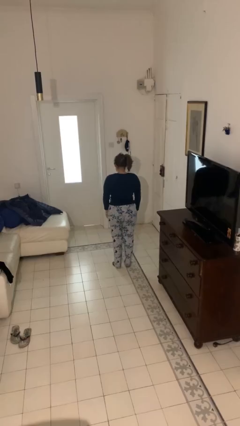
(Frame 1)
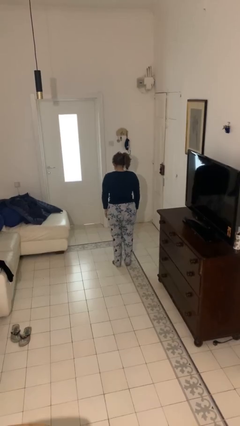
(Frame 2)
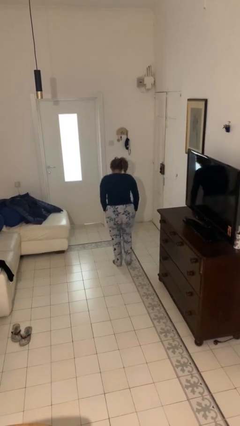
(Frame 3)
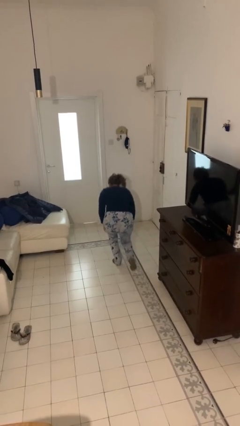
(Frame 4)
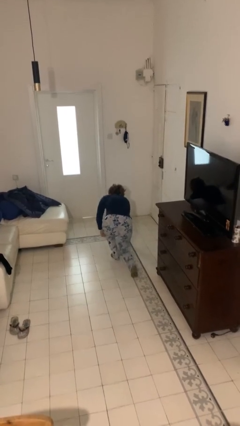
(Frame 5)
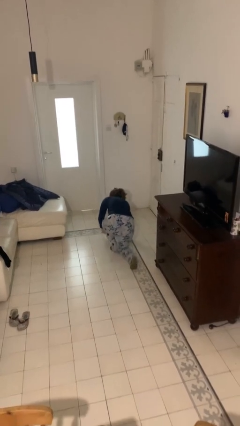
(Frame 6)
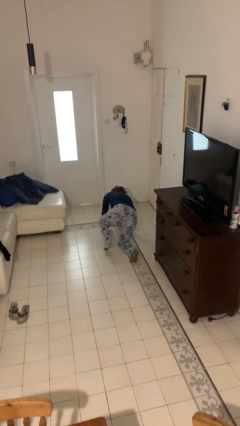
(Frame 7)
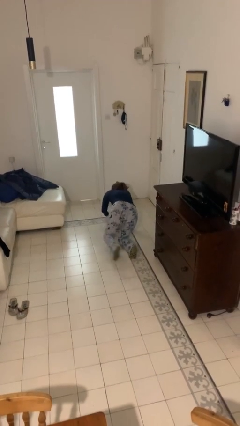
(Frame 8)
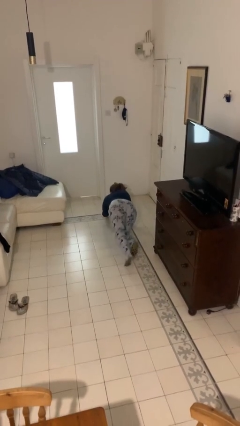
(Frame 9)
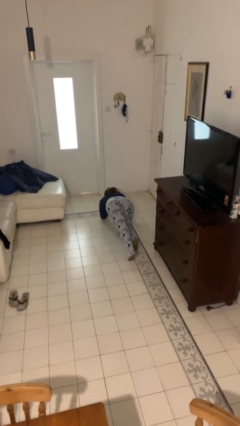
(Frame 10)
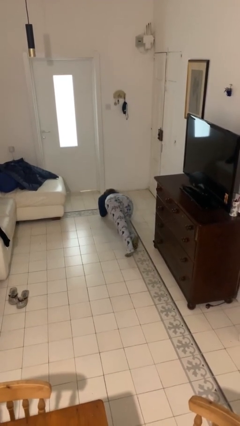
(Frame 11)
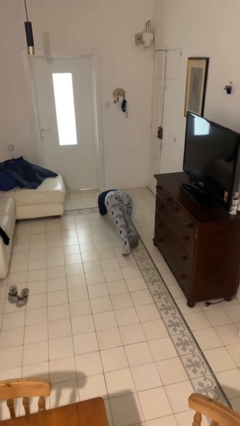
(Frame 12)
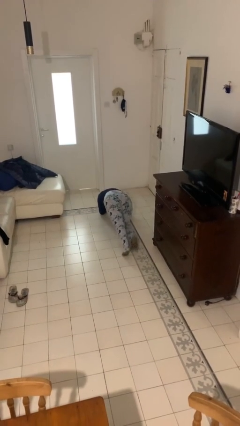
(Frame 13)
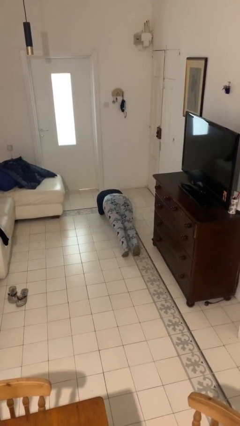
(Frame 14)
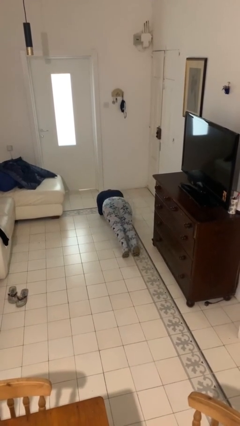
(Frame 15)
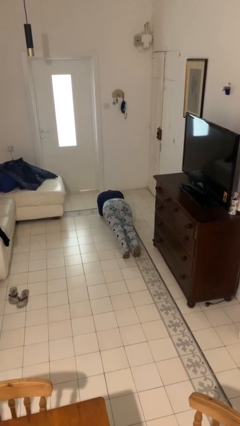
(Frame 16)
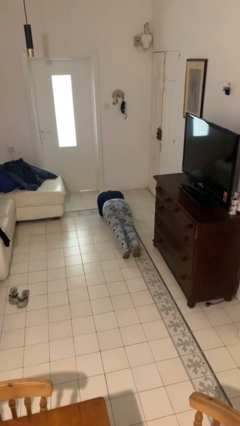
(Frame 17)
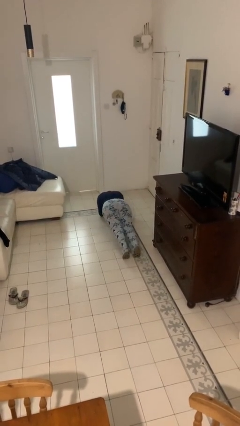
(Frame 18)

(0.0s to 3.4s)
person exercises with plank

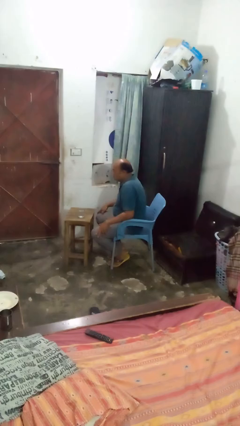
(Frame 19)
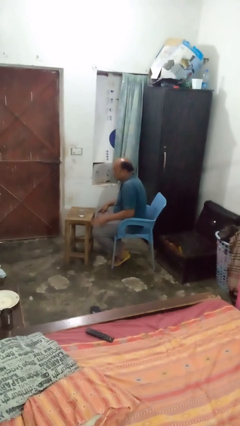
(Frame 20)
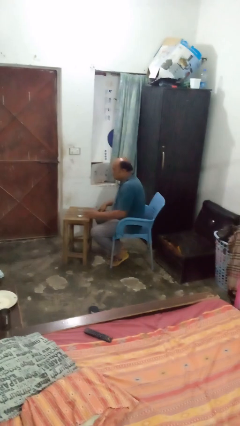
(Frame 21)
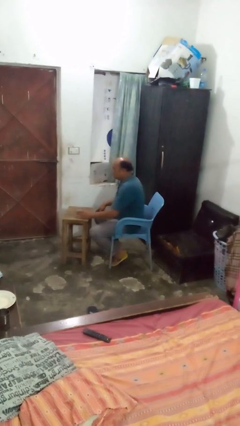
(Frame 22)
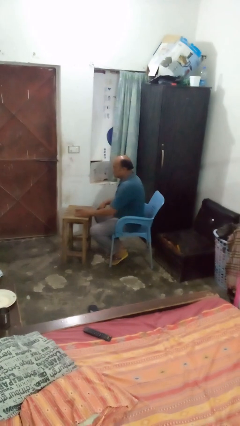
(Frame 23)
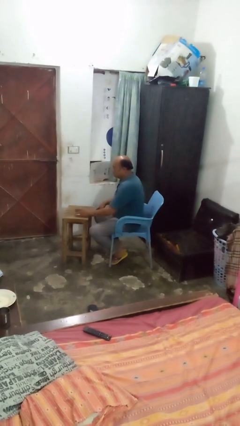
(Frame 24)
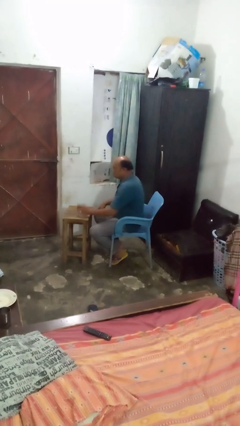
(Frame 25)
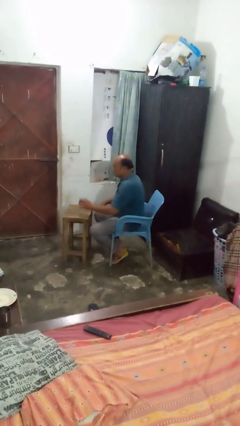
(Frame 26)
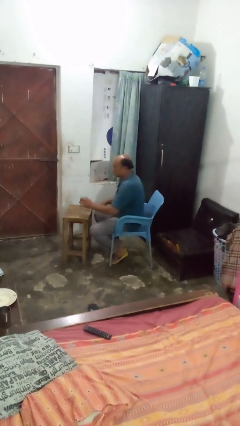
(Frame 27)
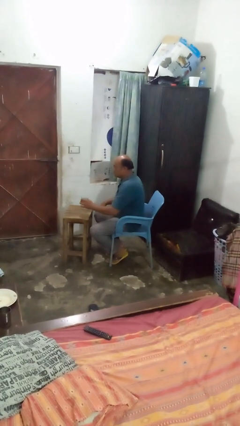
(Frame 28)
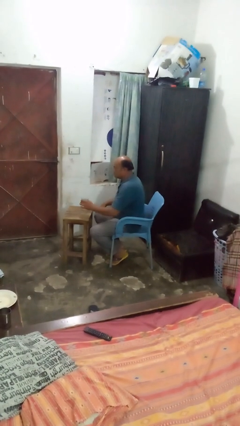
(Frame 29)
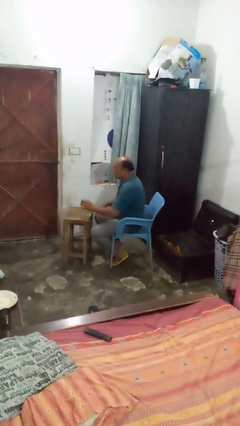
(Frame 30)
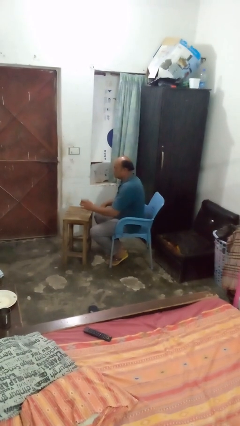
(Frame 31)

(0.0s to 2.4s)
person picks up object from table

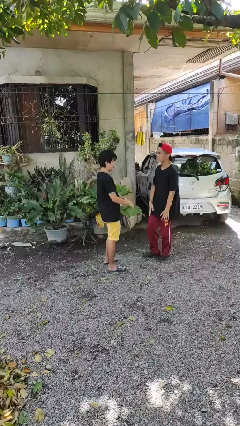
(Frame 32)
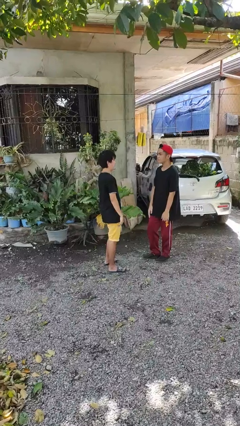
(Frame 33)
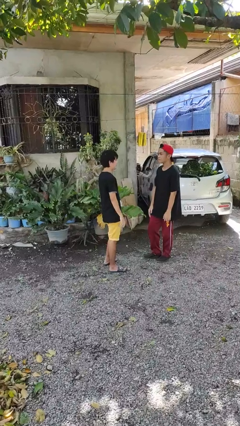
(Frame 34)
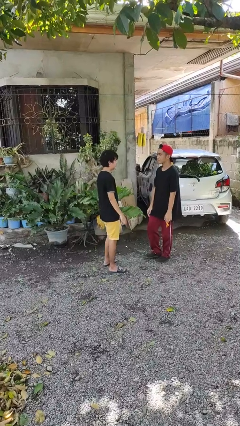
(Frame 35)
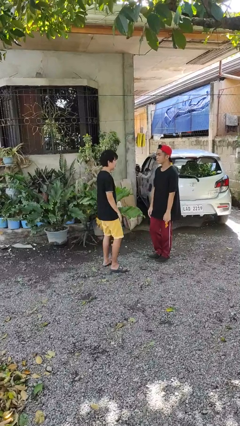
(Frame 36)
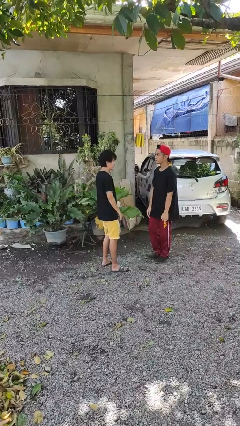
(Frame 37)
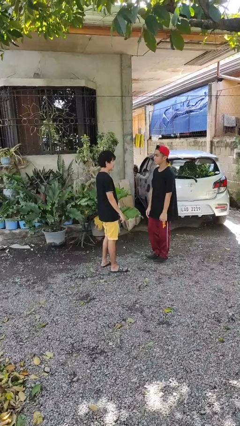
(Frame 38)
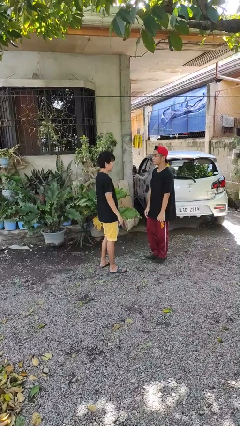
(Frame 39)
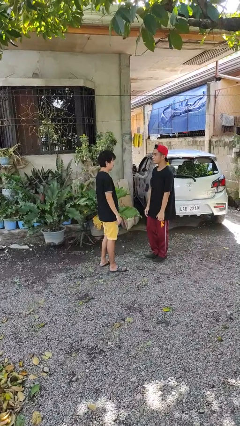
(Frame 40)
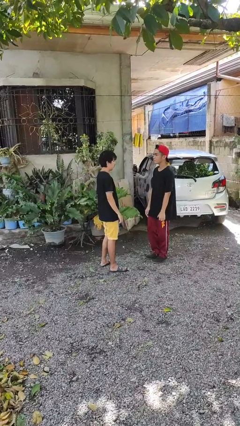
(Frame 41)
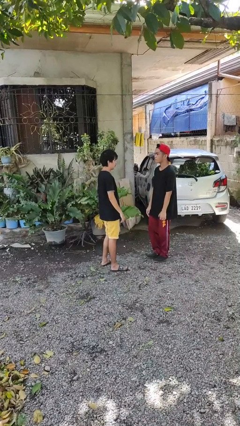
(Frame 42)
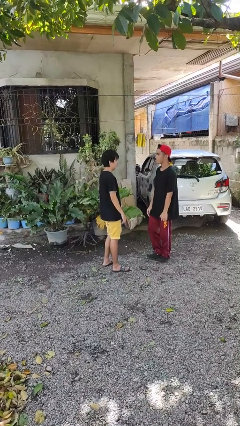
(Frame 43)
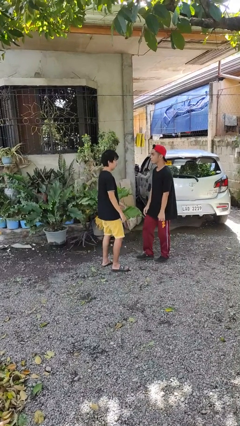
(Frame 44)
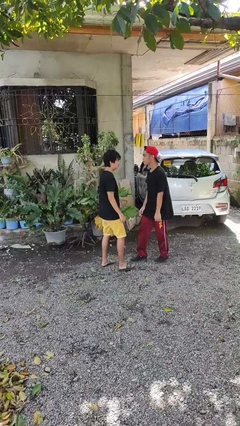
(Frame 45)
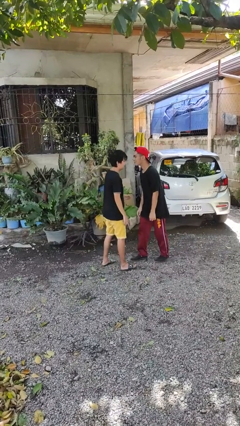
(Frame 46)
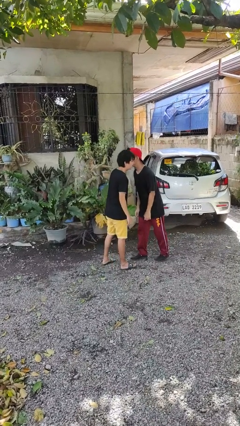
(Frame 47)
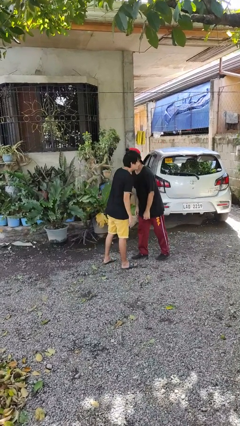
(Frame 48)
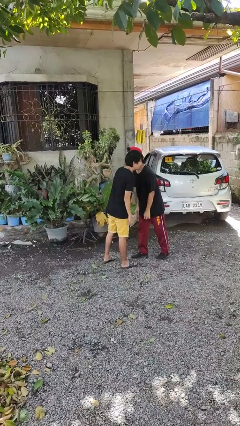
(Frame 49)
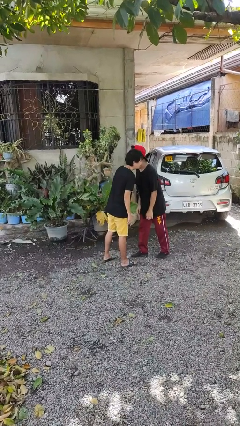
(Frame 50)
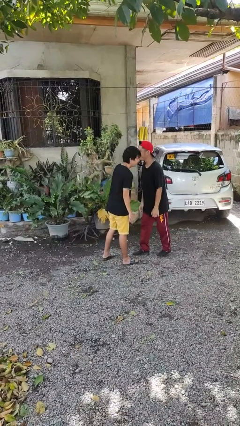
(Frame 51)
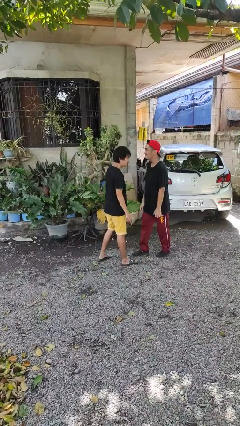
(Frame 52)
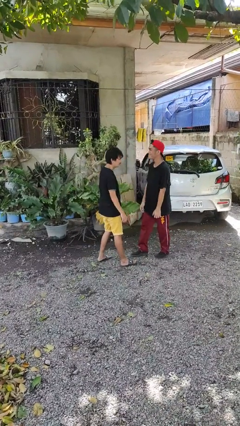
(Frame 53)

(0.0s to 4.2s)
person kisses cheek of person

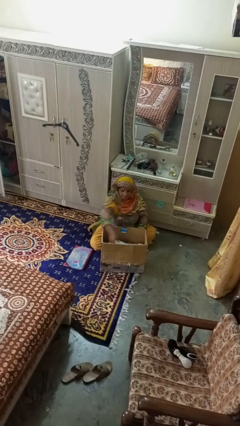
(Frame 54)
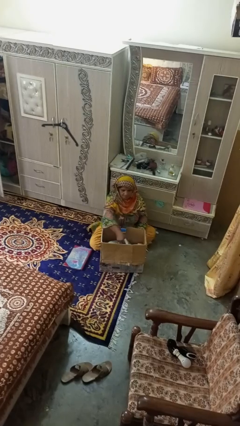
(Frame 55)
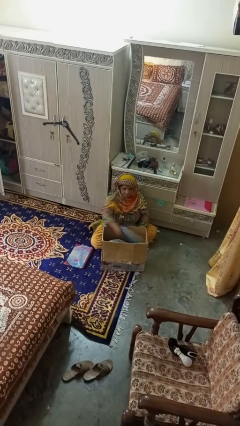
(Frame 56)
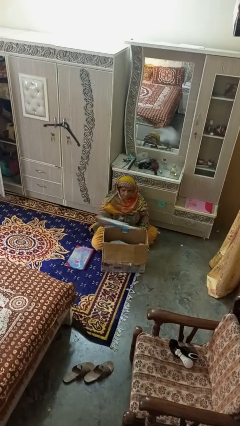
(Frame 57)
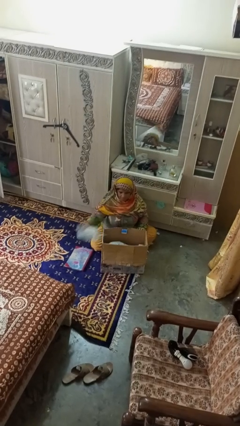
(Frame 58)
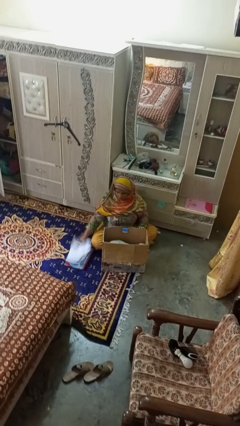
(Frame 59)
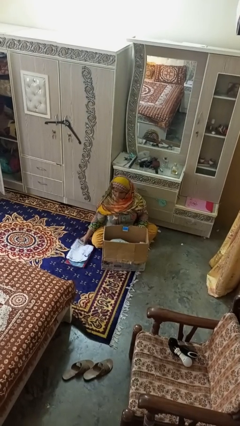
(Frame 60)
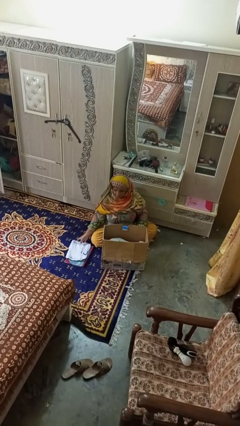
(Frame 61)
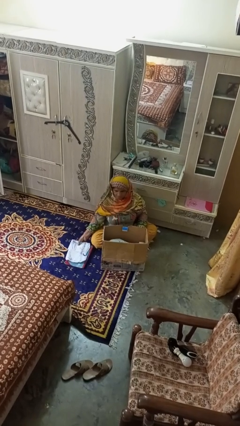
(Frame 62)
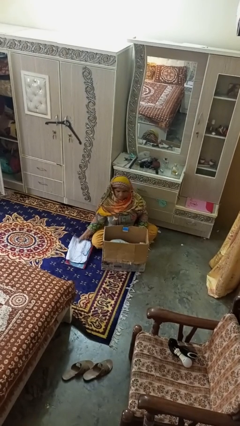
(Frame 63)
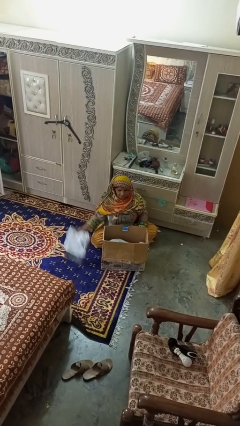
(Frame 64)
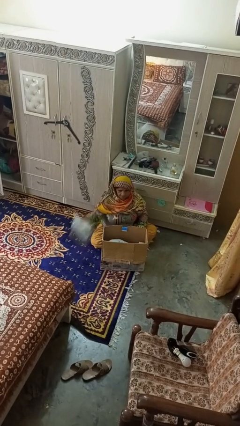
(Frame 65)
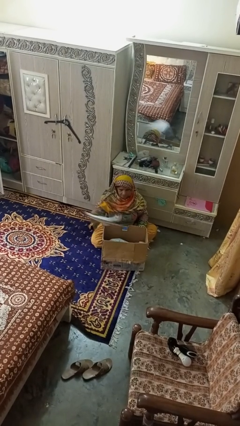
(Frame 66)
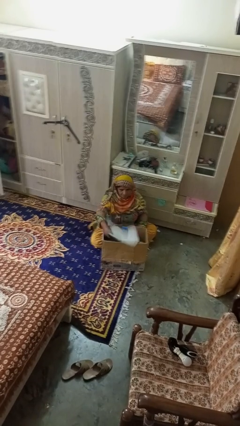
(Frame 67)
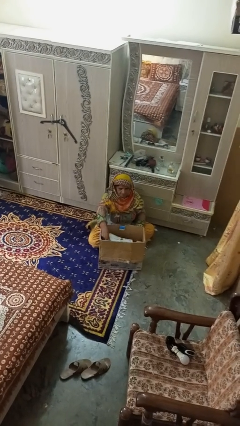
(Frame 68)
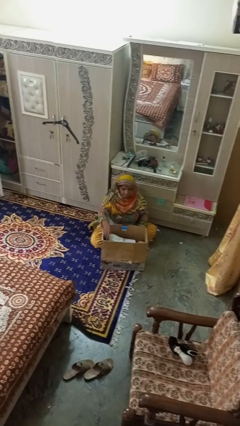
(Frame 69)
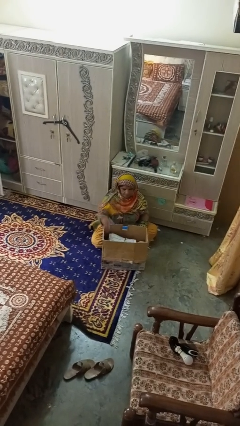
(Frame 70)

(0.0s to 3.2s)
person puts object into box

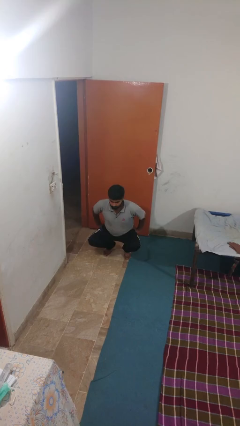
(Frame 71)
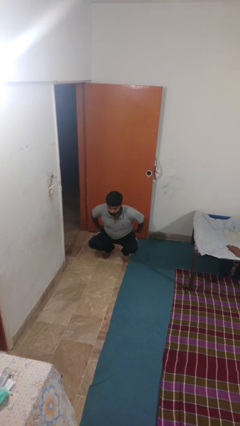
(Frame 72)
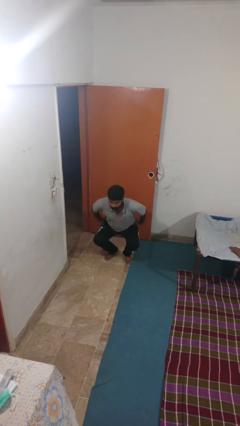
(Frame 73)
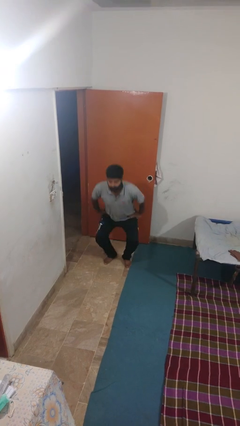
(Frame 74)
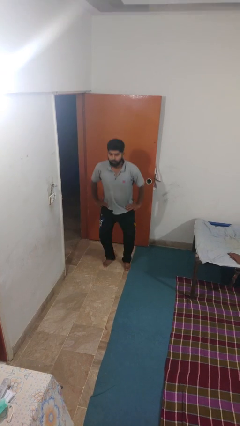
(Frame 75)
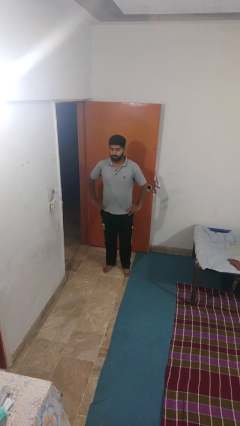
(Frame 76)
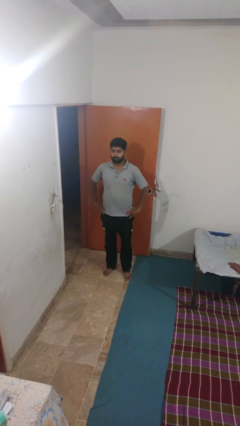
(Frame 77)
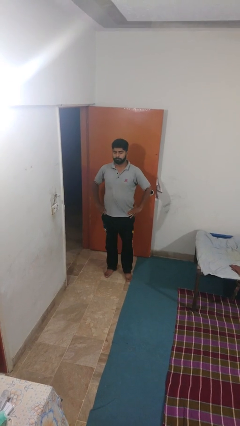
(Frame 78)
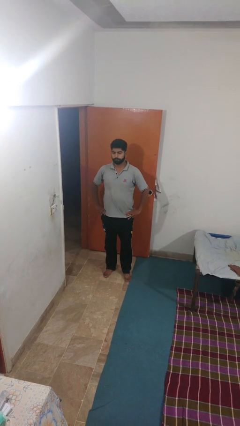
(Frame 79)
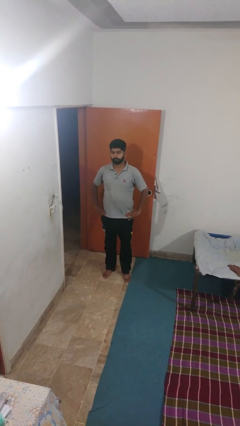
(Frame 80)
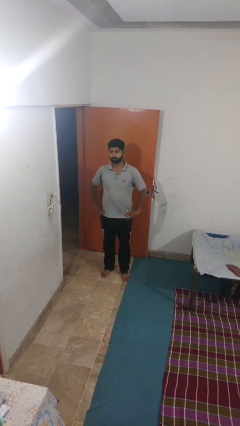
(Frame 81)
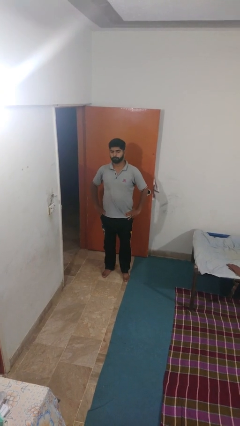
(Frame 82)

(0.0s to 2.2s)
person stands up

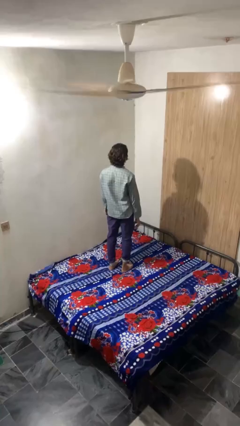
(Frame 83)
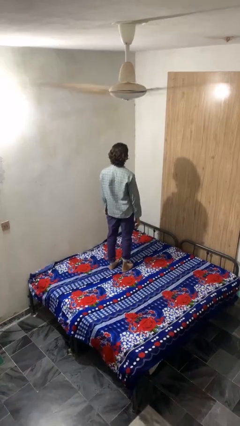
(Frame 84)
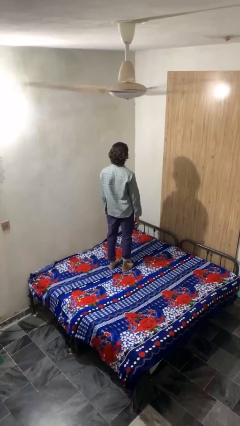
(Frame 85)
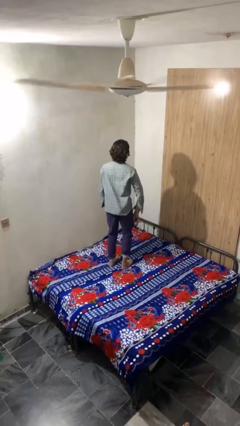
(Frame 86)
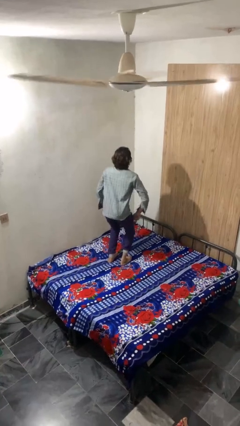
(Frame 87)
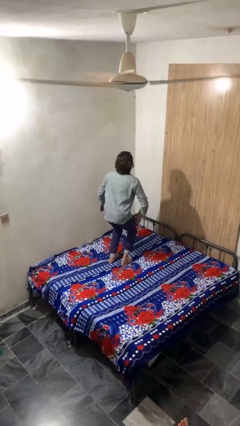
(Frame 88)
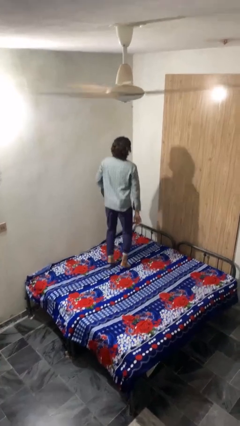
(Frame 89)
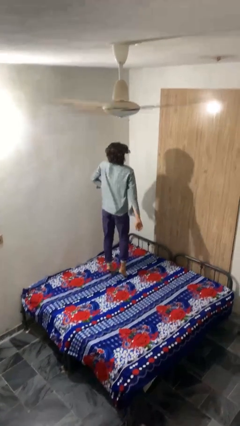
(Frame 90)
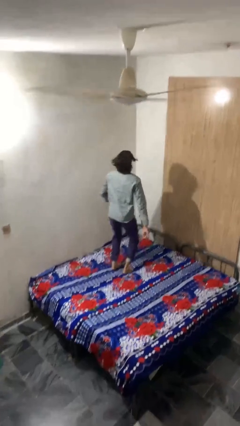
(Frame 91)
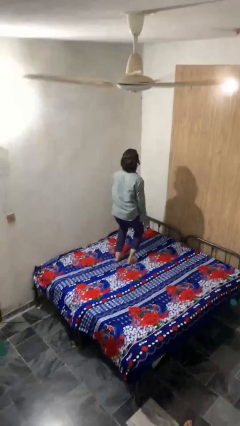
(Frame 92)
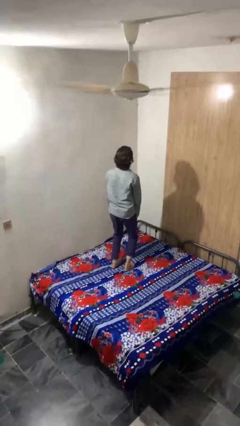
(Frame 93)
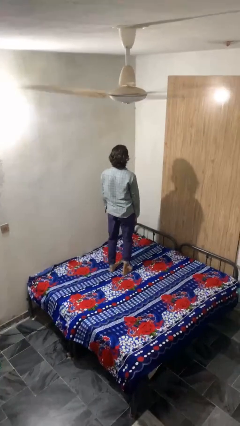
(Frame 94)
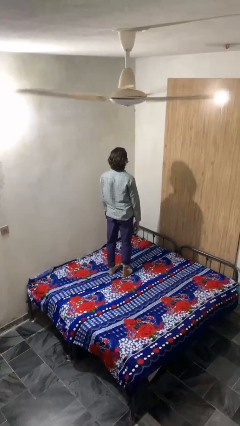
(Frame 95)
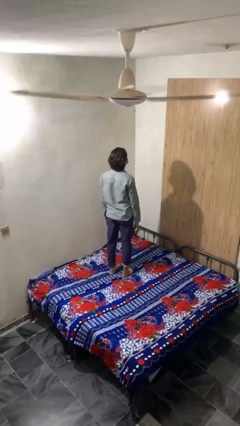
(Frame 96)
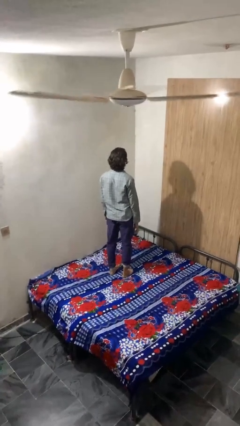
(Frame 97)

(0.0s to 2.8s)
person jumps on bed
